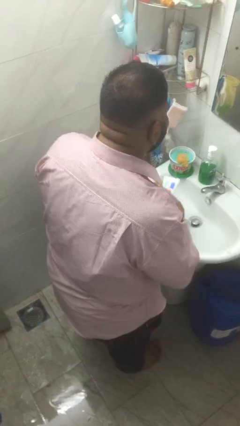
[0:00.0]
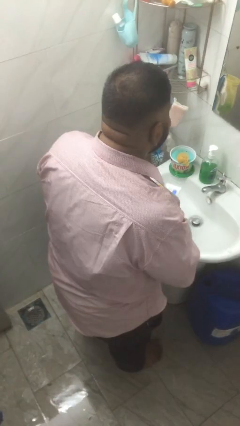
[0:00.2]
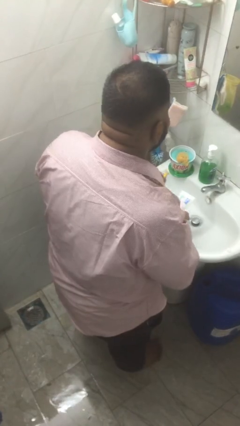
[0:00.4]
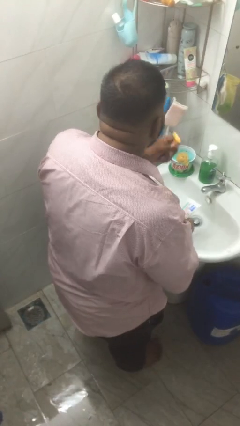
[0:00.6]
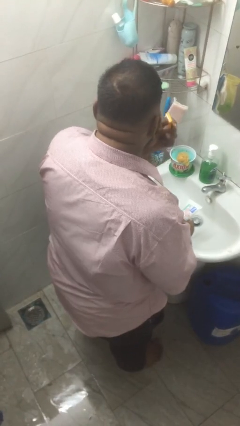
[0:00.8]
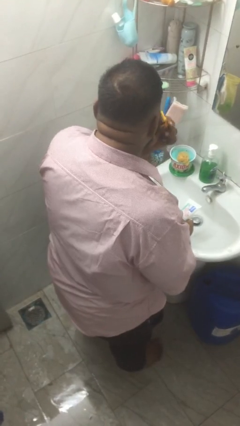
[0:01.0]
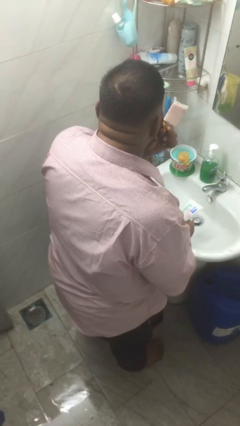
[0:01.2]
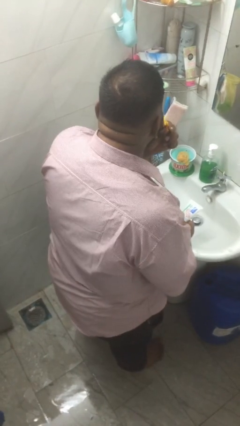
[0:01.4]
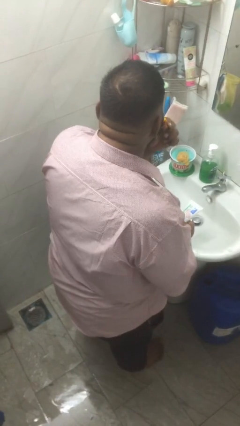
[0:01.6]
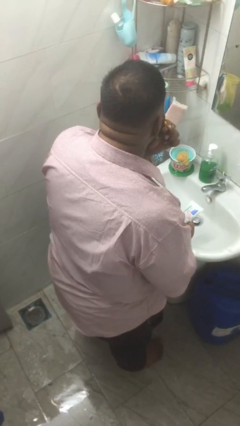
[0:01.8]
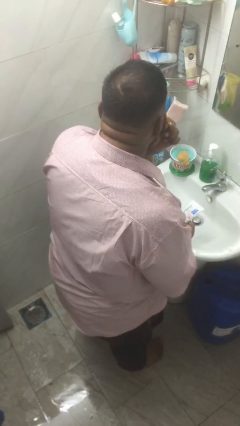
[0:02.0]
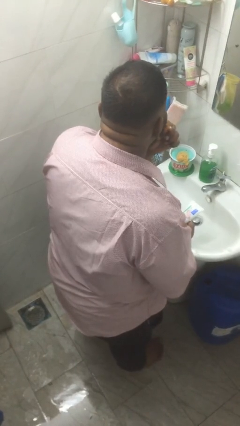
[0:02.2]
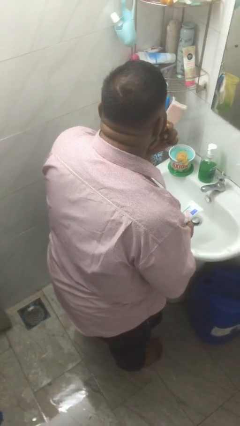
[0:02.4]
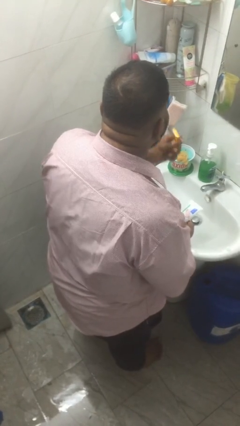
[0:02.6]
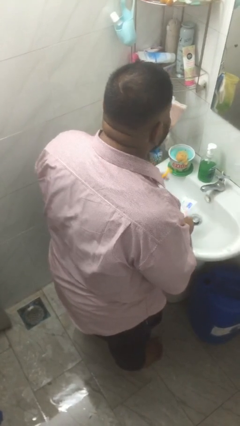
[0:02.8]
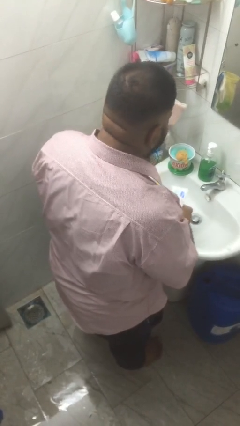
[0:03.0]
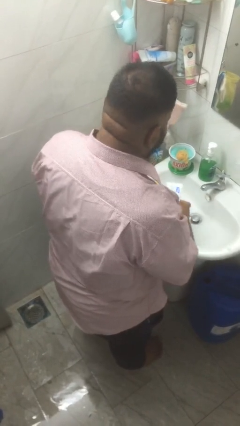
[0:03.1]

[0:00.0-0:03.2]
person shaves face

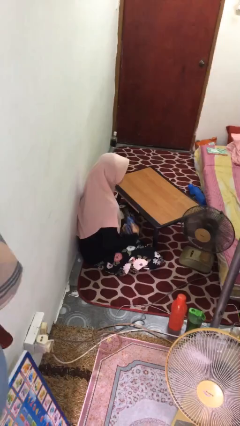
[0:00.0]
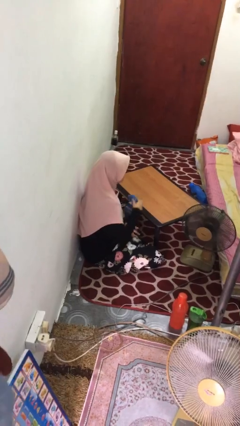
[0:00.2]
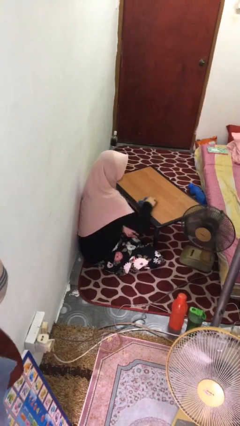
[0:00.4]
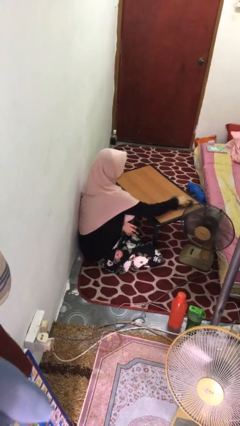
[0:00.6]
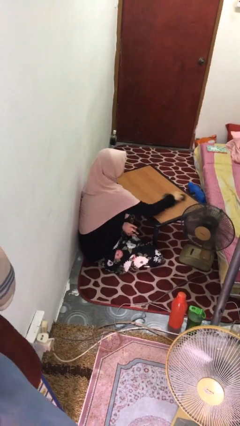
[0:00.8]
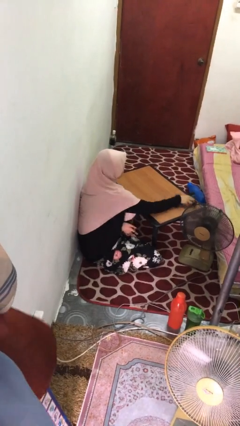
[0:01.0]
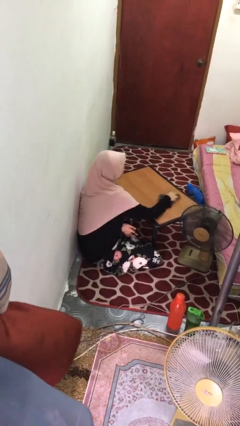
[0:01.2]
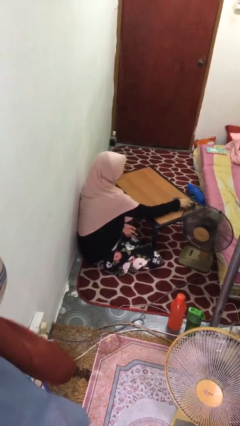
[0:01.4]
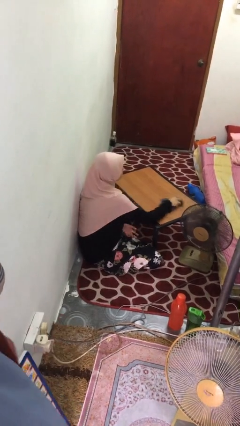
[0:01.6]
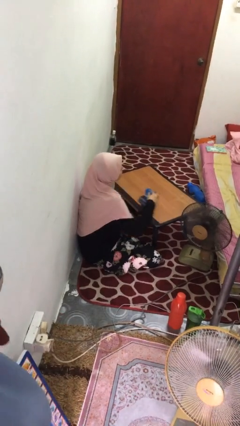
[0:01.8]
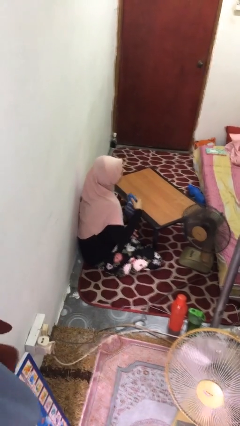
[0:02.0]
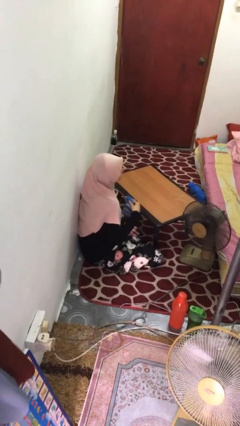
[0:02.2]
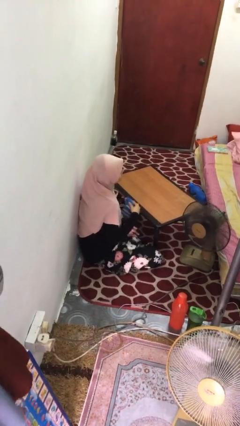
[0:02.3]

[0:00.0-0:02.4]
person cleans table with rag

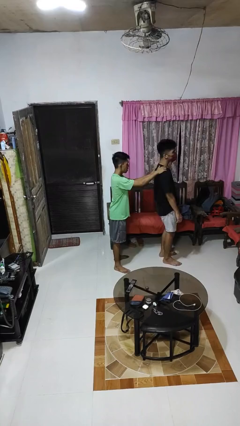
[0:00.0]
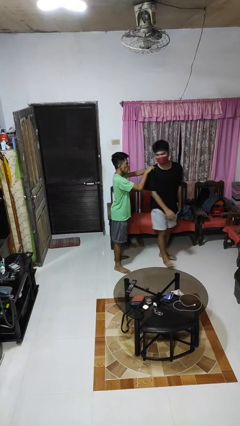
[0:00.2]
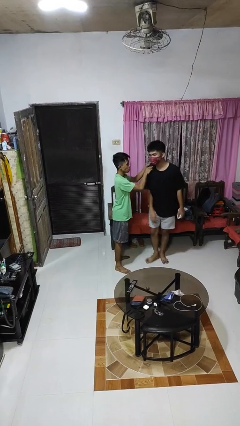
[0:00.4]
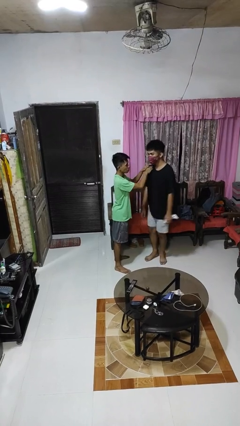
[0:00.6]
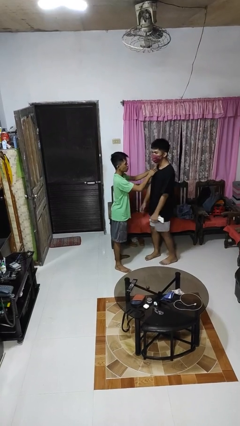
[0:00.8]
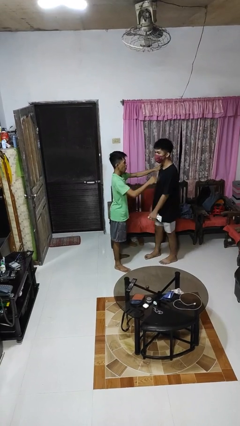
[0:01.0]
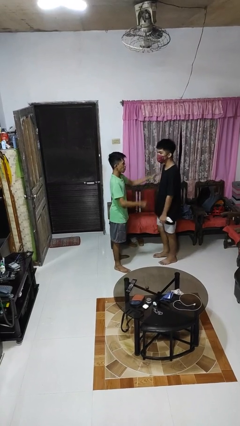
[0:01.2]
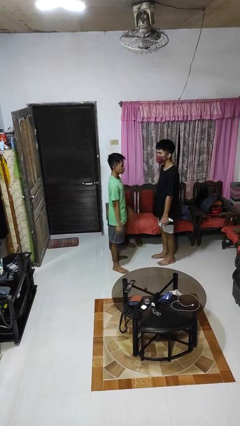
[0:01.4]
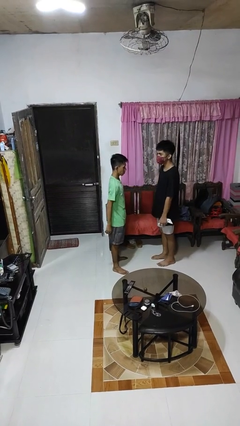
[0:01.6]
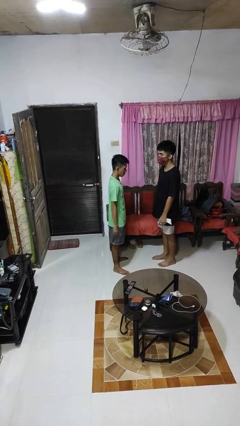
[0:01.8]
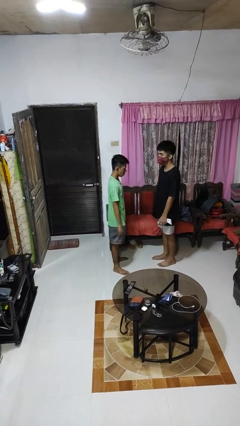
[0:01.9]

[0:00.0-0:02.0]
person spins person around

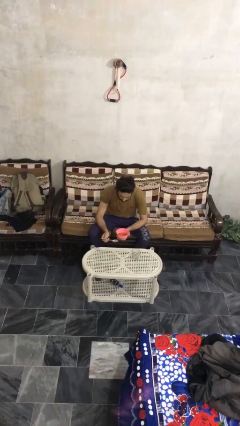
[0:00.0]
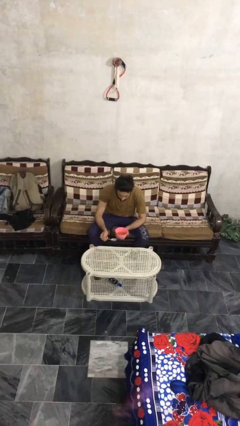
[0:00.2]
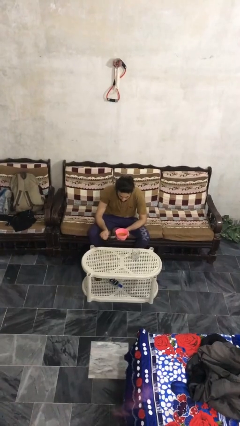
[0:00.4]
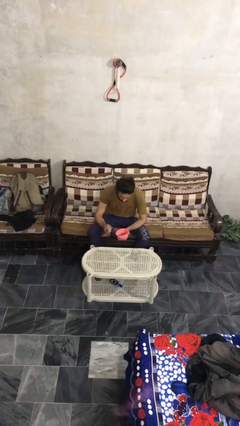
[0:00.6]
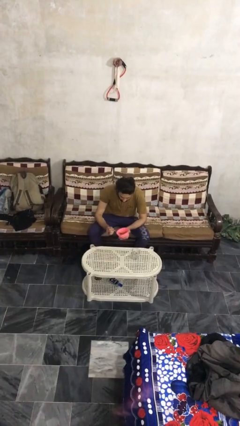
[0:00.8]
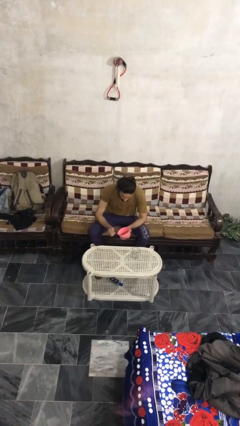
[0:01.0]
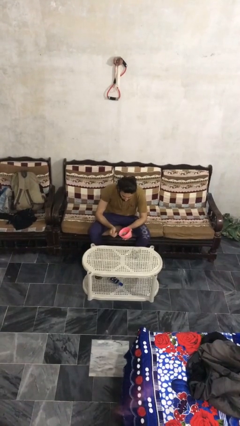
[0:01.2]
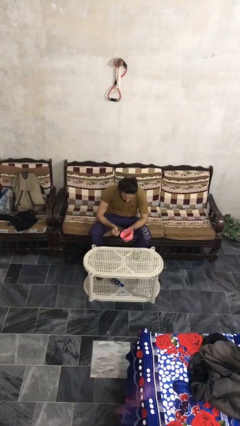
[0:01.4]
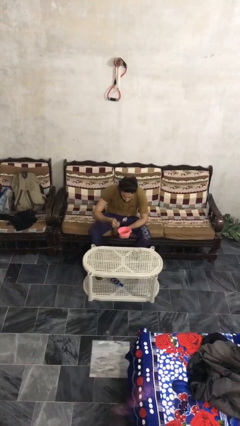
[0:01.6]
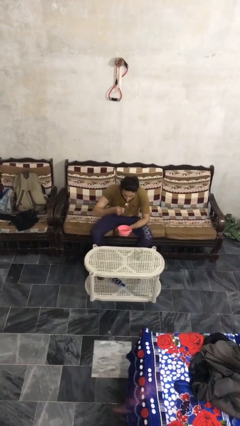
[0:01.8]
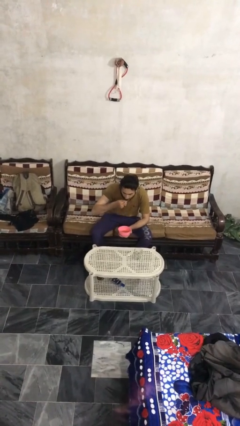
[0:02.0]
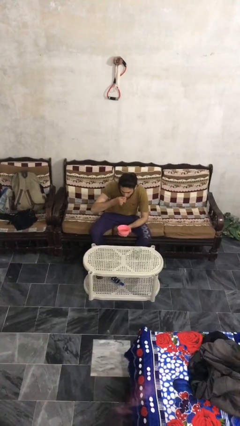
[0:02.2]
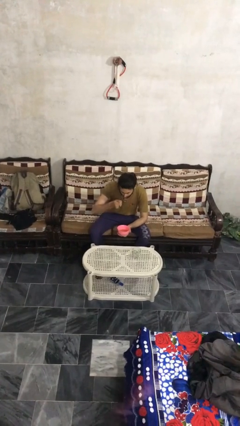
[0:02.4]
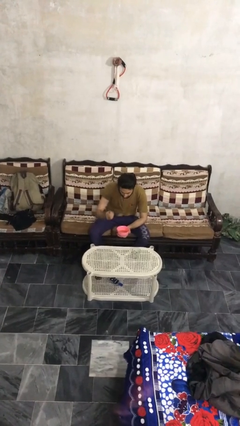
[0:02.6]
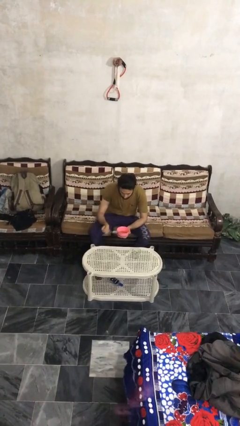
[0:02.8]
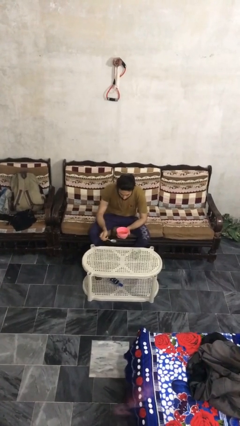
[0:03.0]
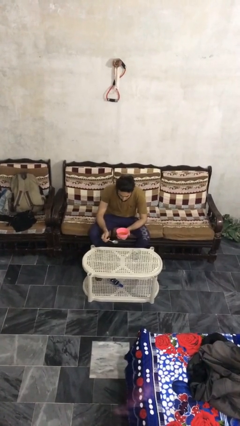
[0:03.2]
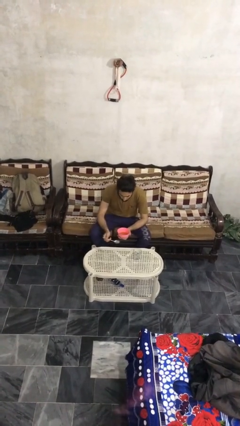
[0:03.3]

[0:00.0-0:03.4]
person eats with utensil

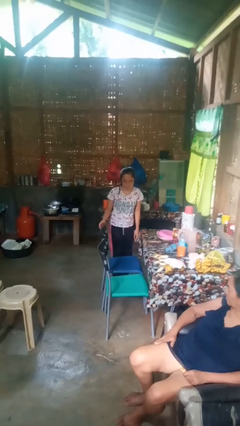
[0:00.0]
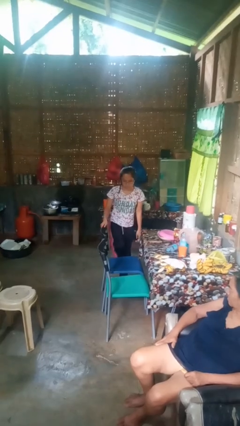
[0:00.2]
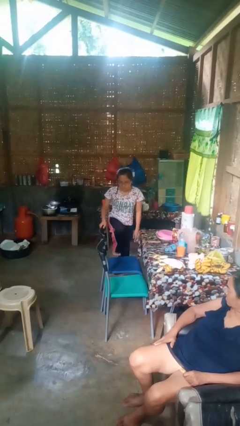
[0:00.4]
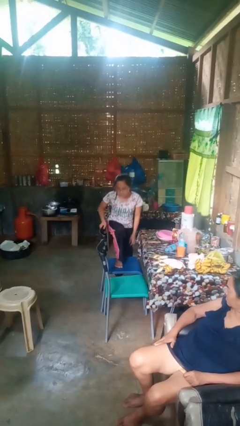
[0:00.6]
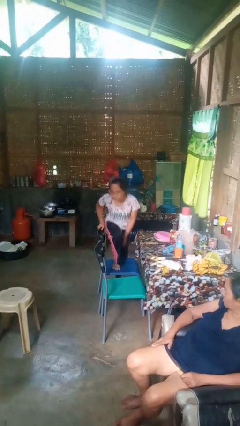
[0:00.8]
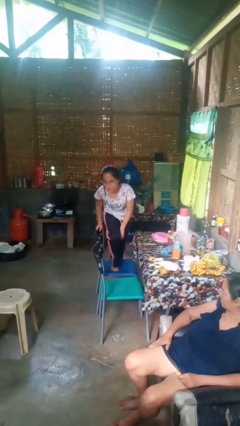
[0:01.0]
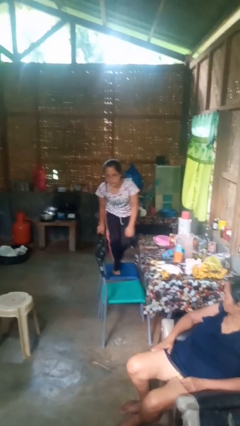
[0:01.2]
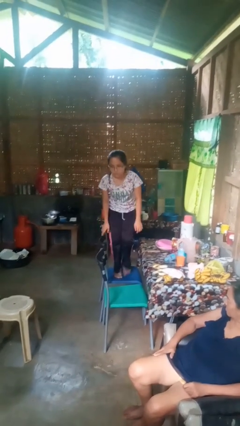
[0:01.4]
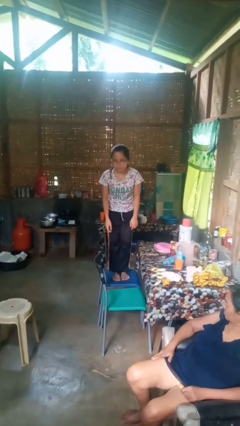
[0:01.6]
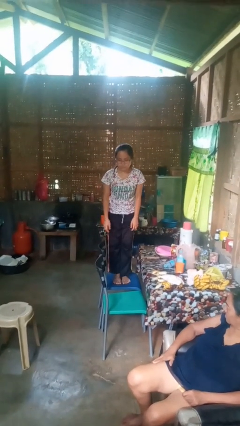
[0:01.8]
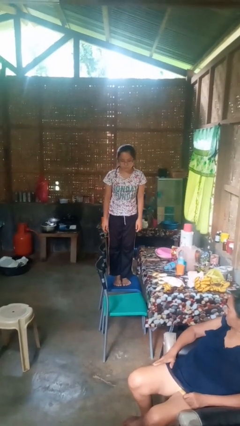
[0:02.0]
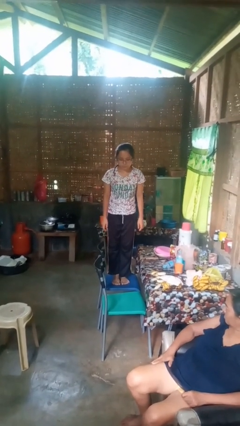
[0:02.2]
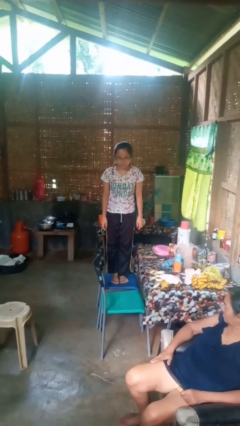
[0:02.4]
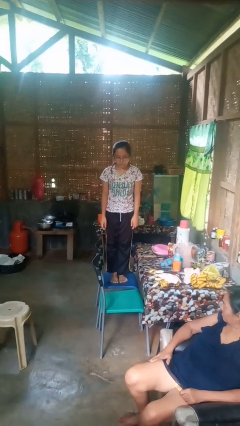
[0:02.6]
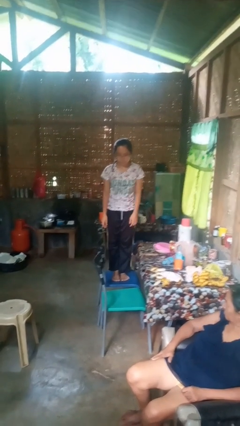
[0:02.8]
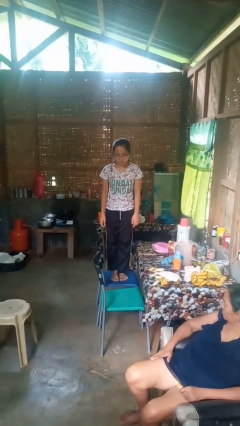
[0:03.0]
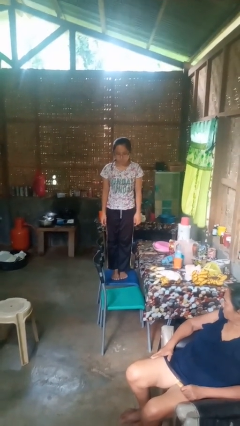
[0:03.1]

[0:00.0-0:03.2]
person climbs on chair

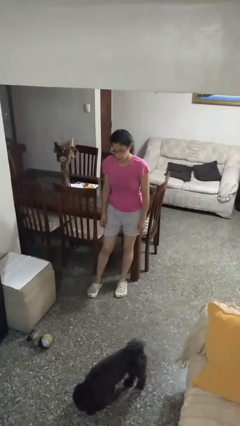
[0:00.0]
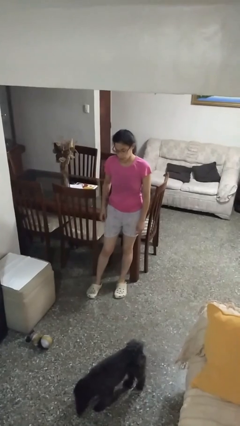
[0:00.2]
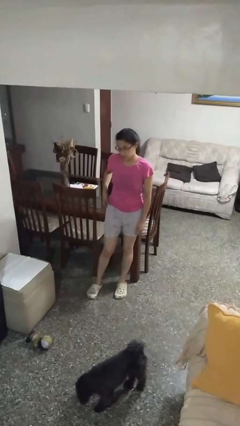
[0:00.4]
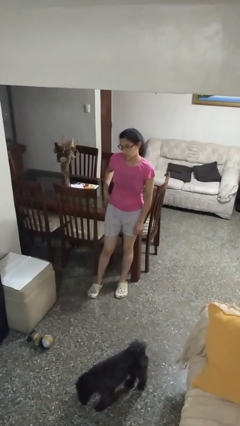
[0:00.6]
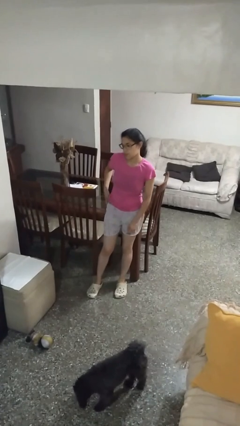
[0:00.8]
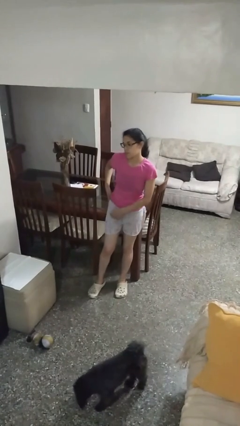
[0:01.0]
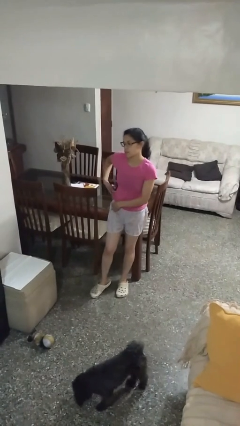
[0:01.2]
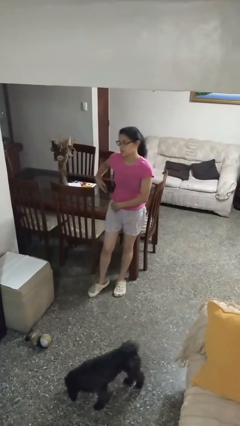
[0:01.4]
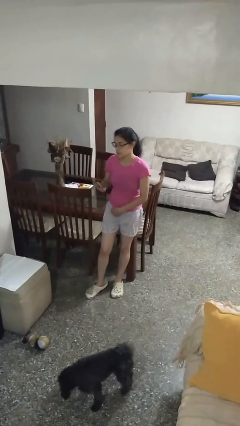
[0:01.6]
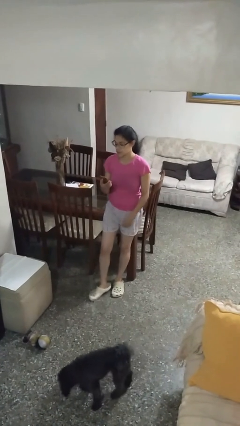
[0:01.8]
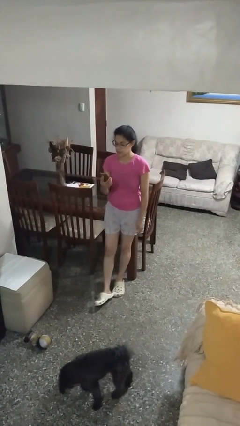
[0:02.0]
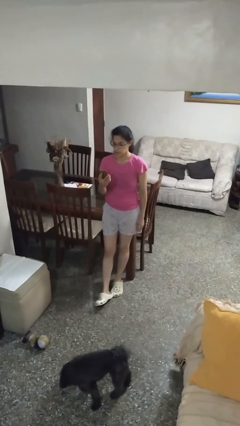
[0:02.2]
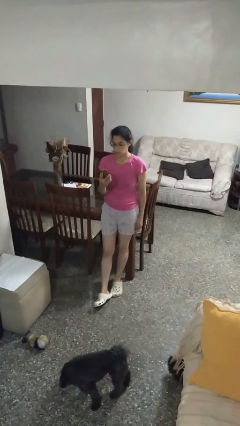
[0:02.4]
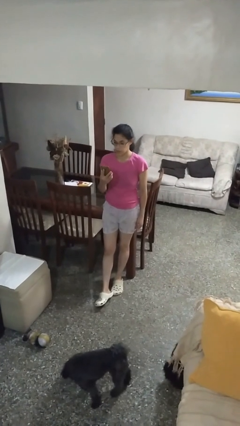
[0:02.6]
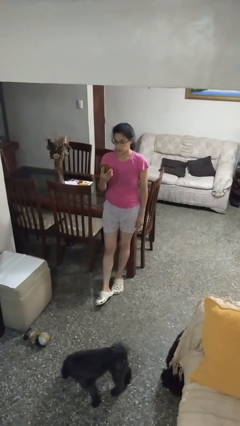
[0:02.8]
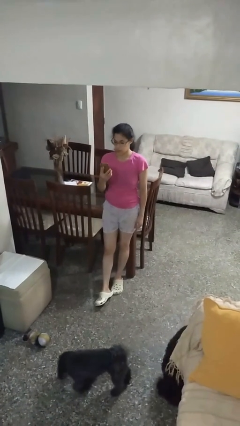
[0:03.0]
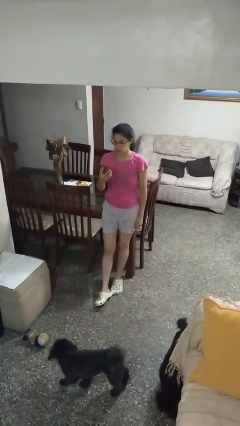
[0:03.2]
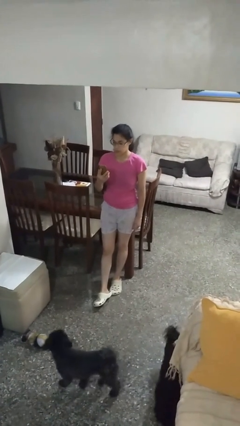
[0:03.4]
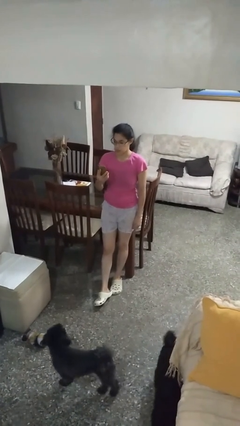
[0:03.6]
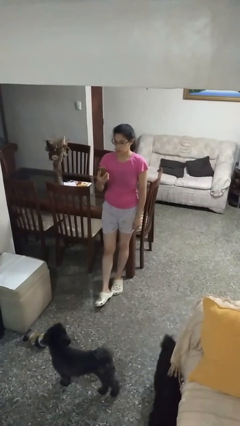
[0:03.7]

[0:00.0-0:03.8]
person takes phone from pocket
